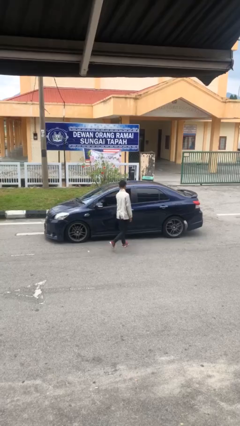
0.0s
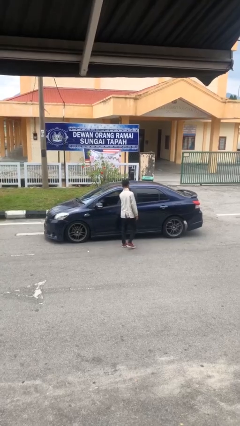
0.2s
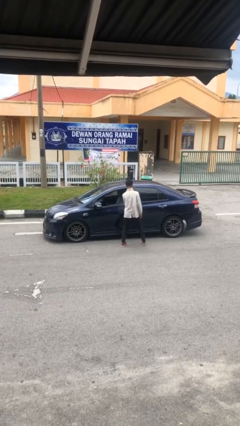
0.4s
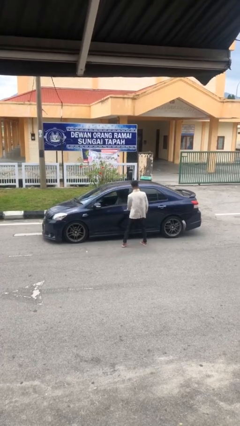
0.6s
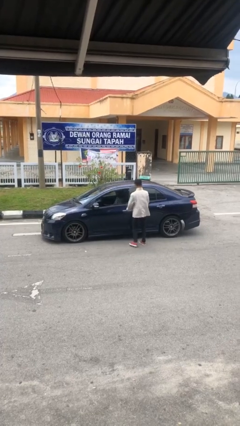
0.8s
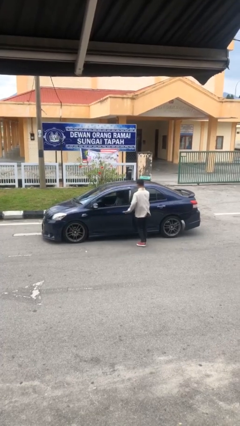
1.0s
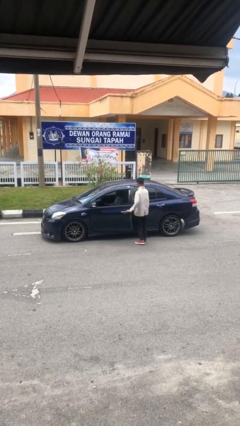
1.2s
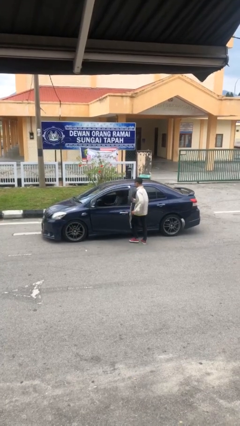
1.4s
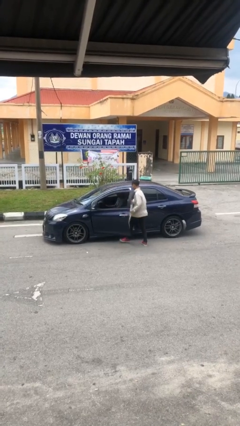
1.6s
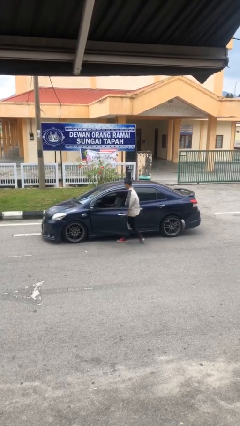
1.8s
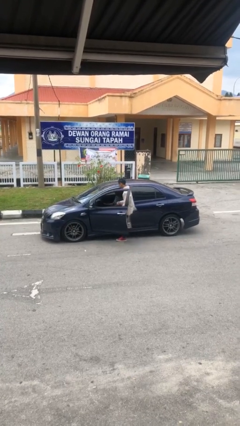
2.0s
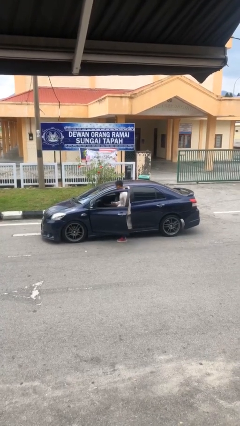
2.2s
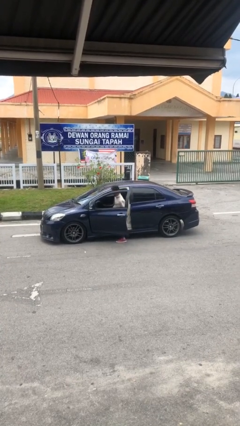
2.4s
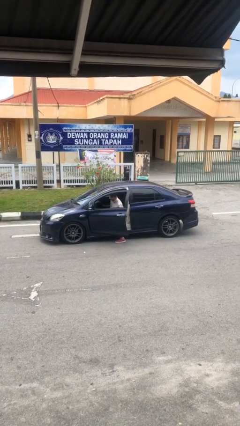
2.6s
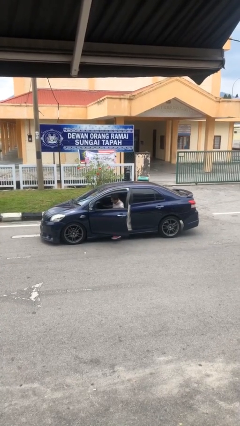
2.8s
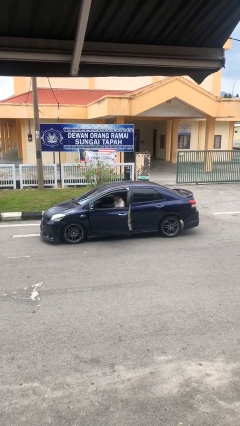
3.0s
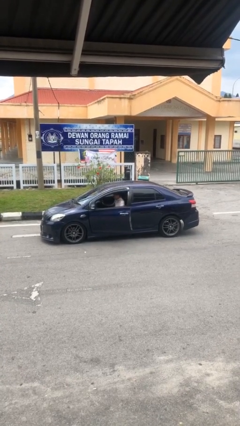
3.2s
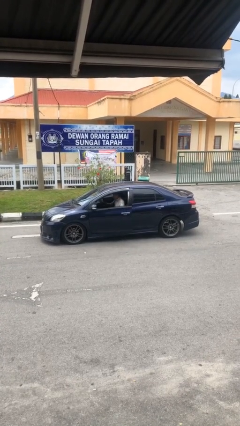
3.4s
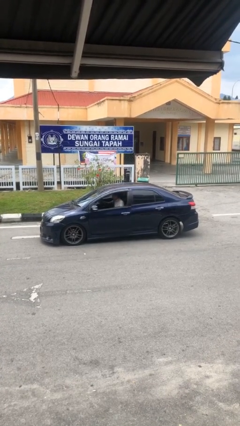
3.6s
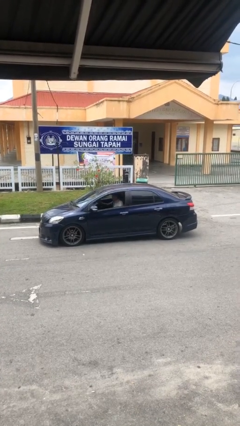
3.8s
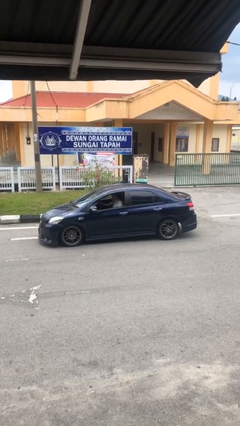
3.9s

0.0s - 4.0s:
car picks up person

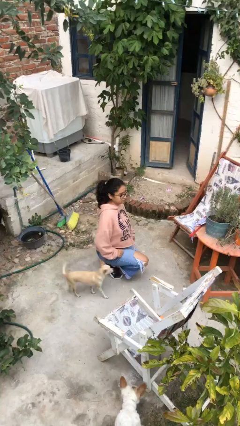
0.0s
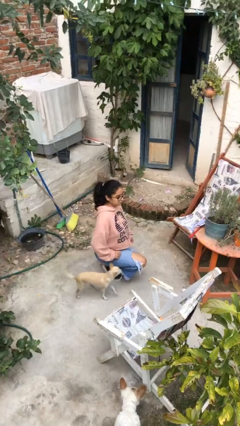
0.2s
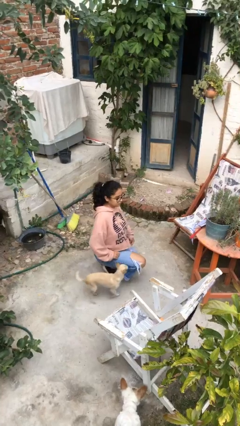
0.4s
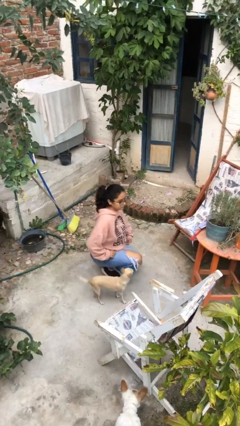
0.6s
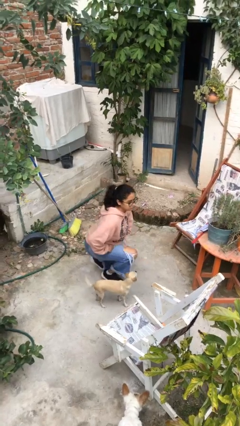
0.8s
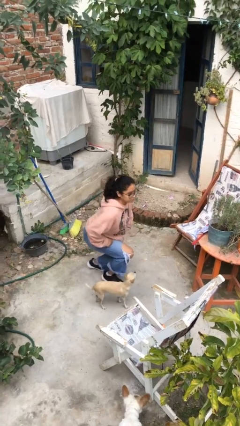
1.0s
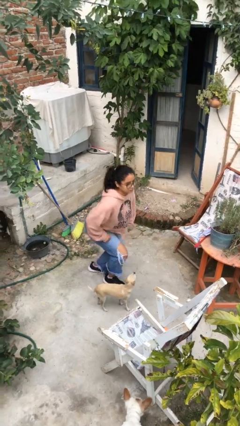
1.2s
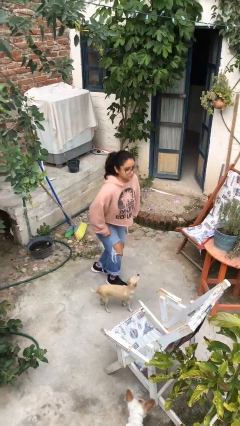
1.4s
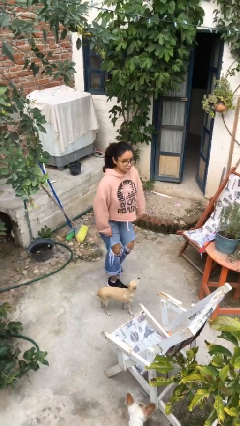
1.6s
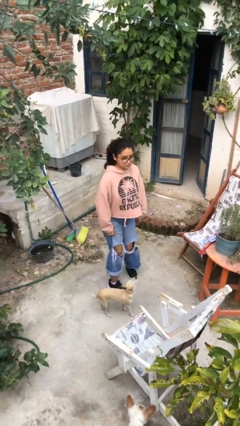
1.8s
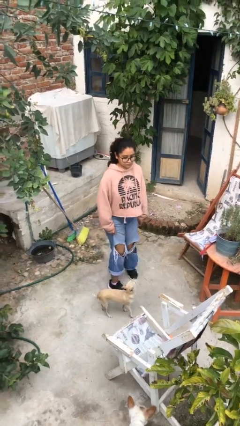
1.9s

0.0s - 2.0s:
person stands up from floor

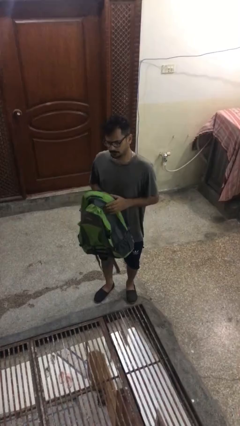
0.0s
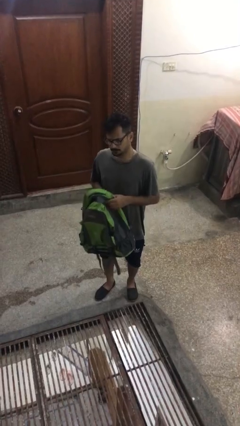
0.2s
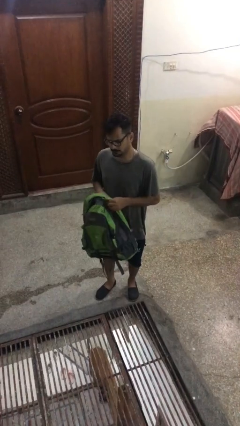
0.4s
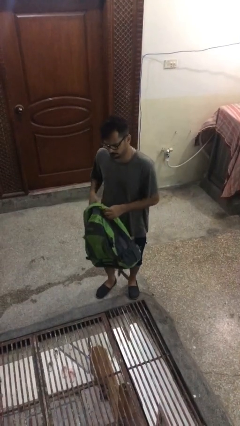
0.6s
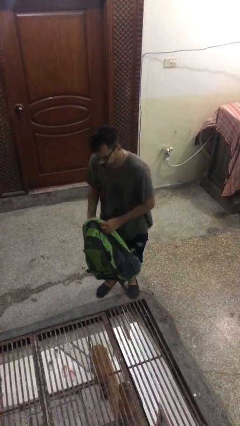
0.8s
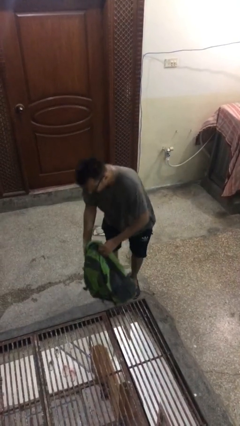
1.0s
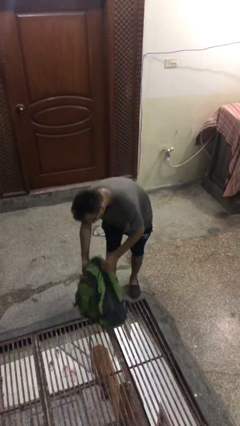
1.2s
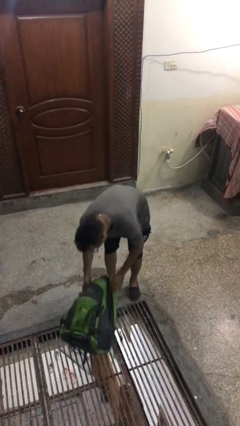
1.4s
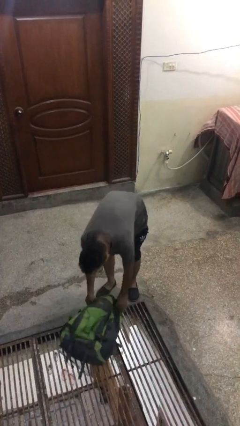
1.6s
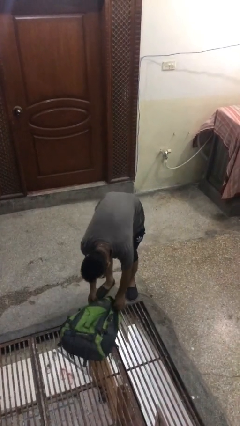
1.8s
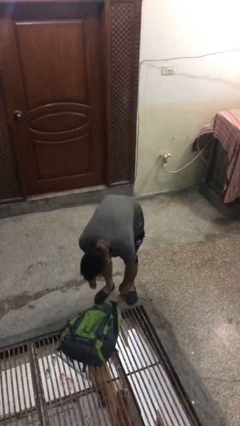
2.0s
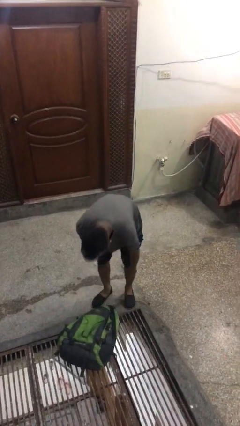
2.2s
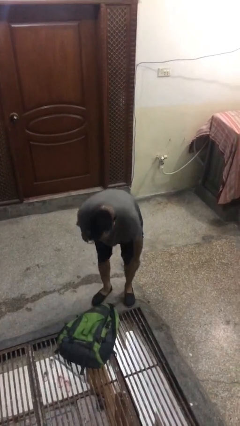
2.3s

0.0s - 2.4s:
person puts down object on floor

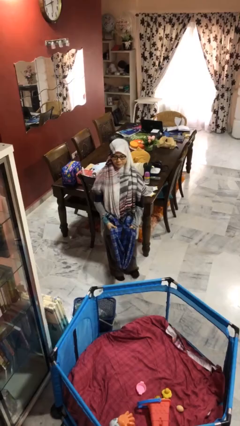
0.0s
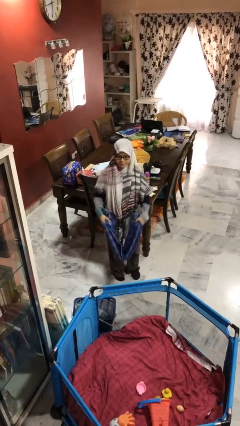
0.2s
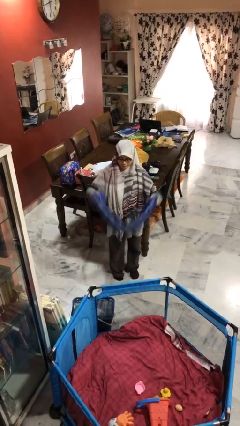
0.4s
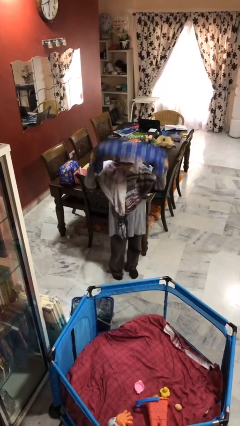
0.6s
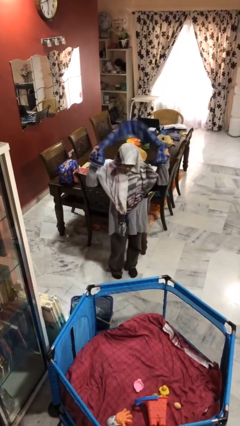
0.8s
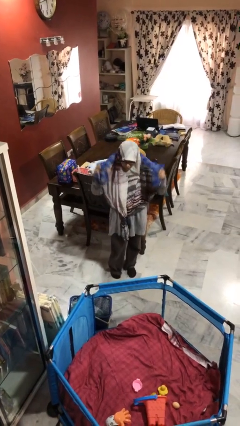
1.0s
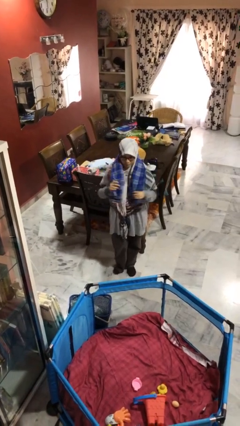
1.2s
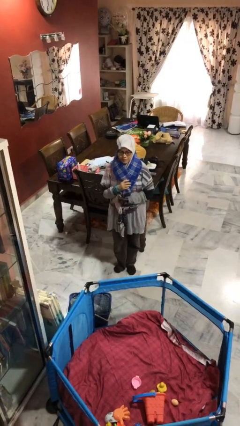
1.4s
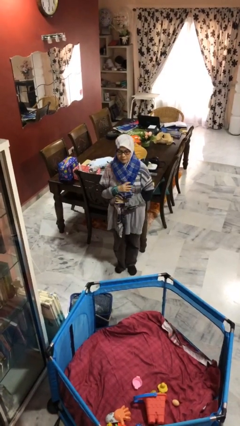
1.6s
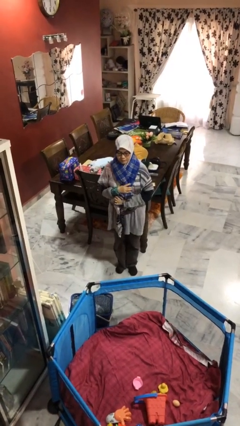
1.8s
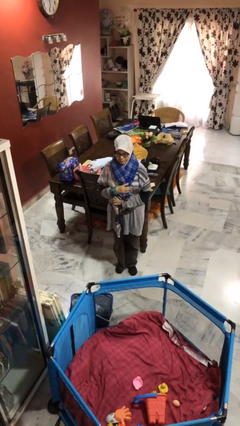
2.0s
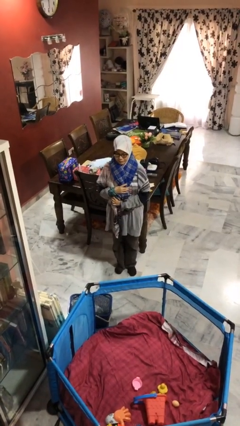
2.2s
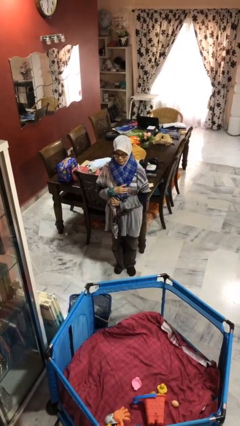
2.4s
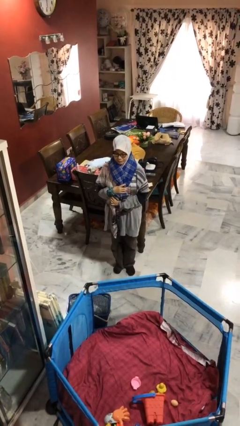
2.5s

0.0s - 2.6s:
person puts on scarf

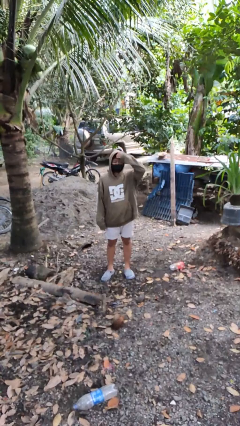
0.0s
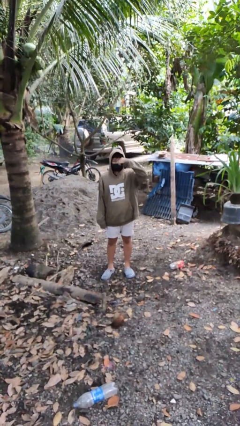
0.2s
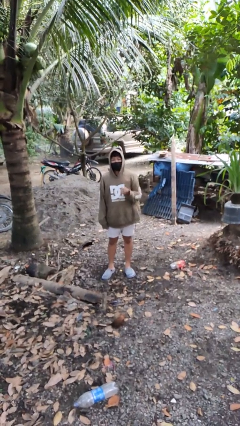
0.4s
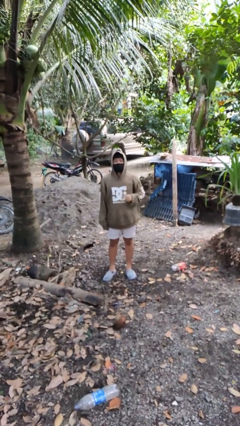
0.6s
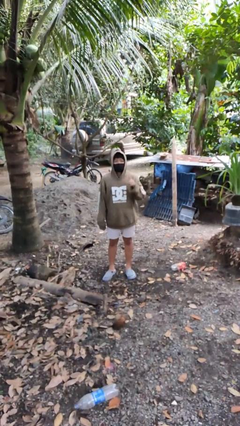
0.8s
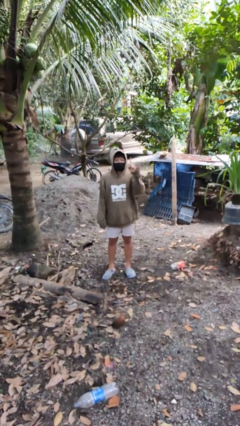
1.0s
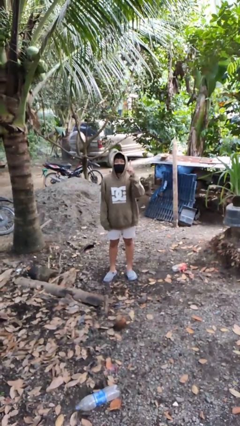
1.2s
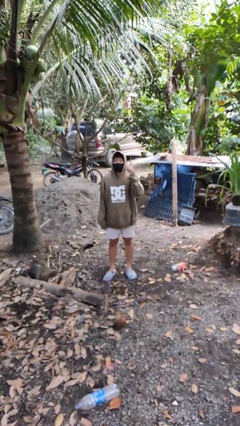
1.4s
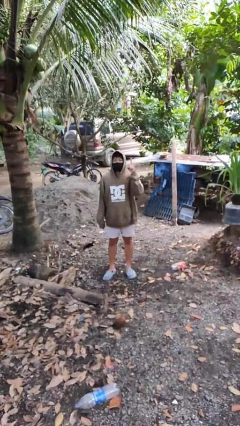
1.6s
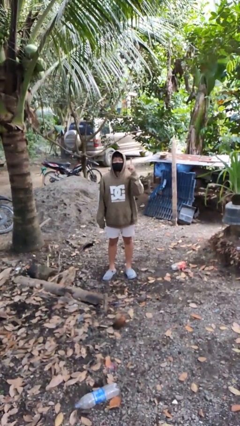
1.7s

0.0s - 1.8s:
person gestures number one

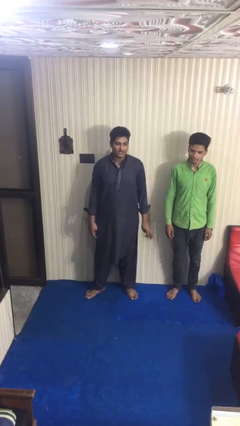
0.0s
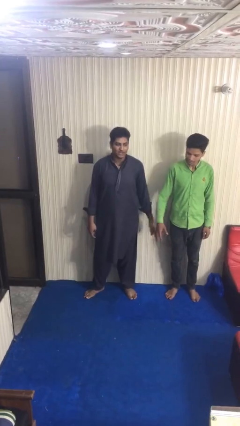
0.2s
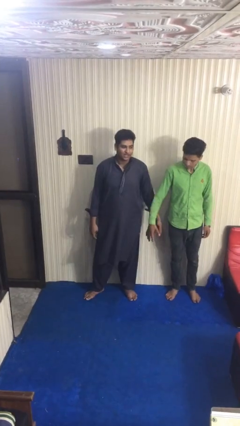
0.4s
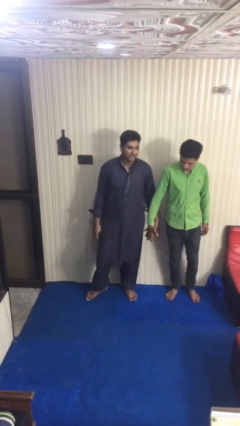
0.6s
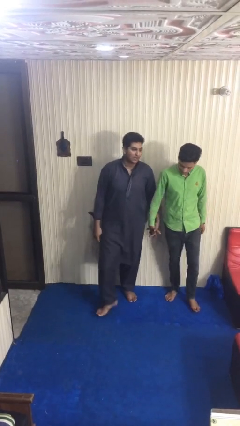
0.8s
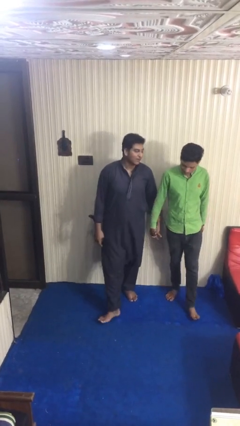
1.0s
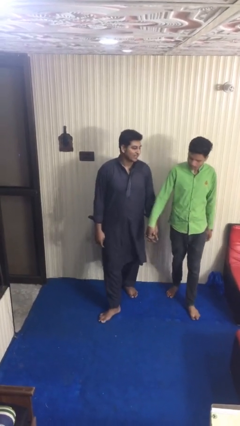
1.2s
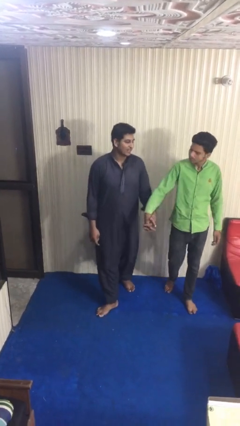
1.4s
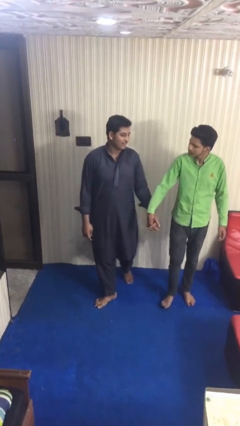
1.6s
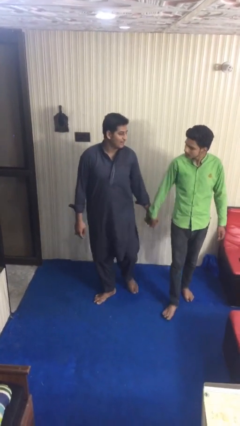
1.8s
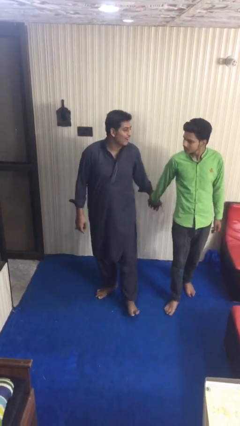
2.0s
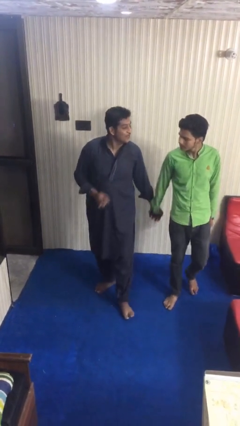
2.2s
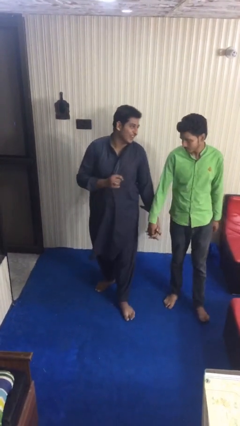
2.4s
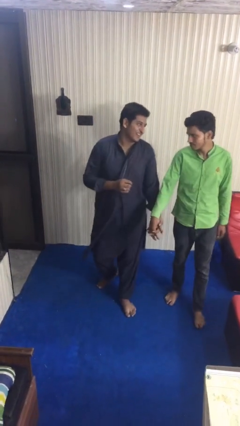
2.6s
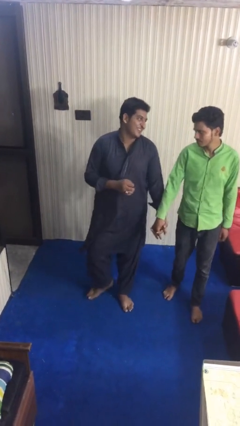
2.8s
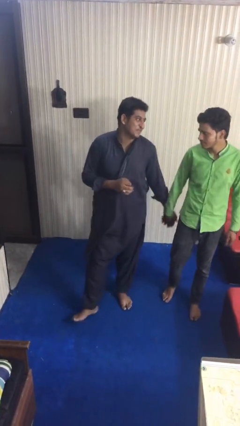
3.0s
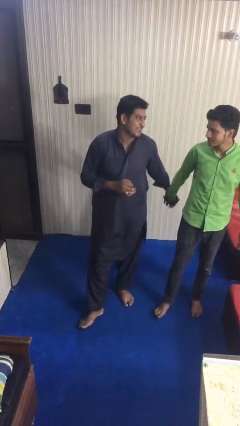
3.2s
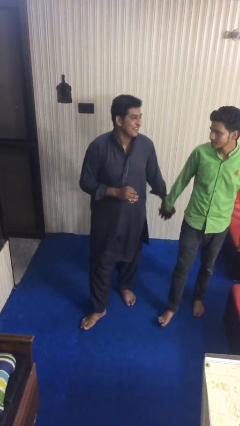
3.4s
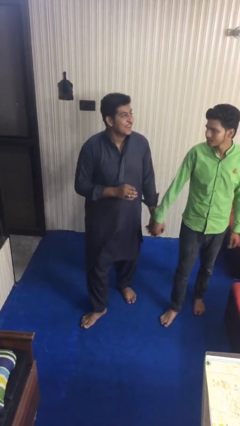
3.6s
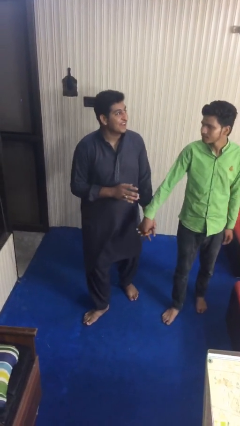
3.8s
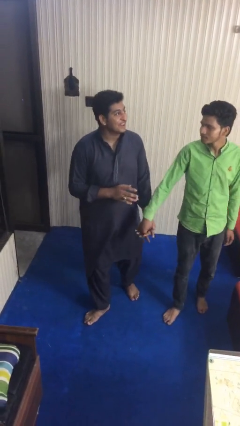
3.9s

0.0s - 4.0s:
person holds hand

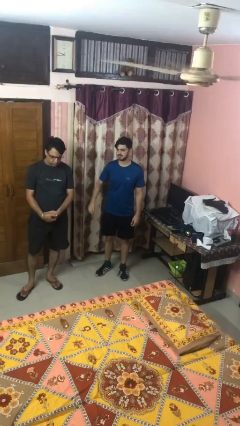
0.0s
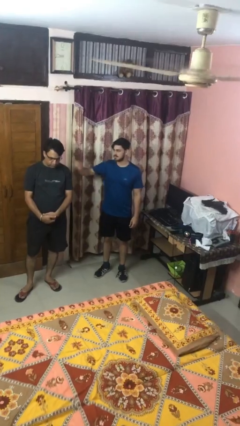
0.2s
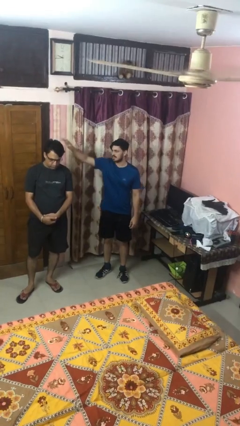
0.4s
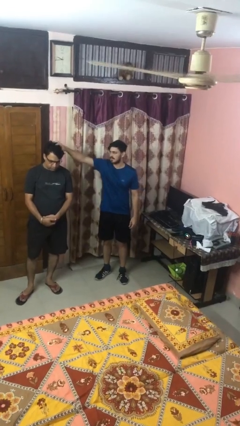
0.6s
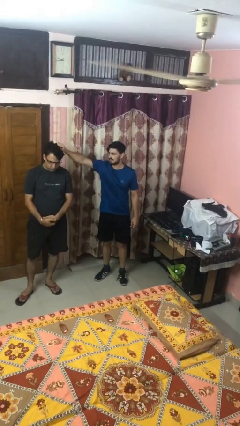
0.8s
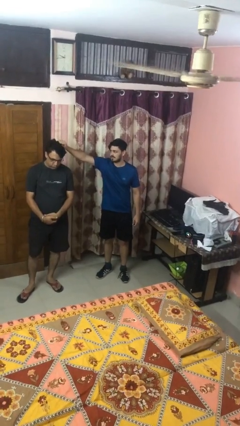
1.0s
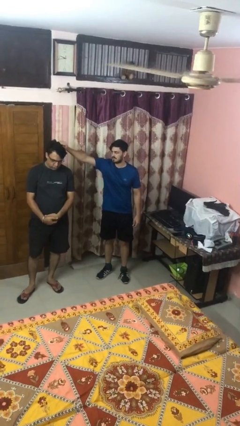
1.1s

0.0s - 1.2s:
person grabs person by hair
